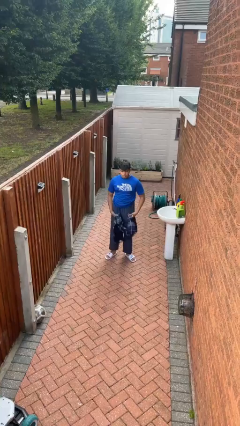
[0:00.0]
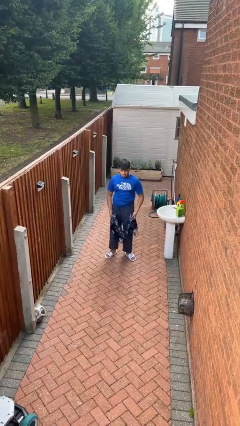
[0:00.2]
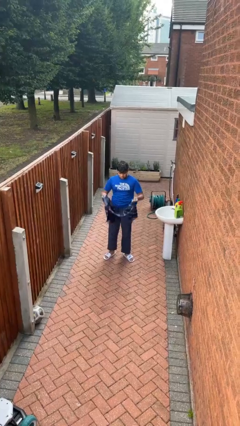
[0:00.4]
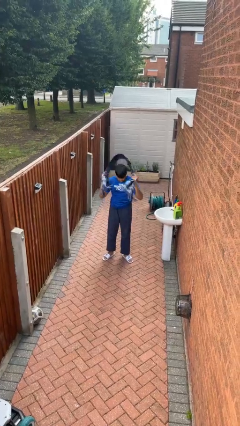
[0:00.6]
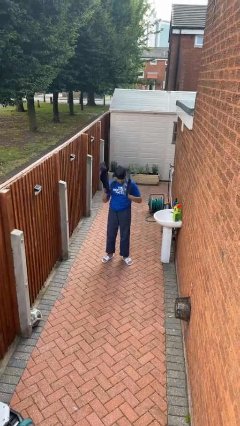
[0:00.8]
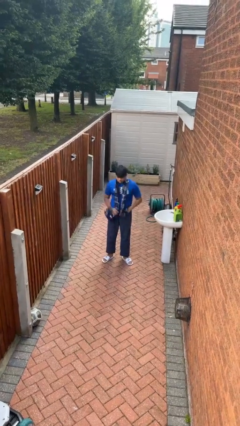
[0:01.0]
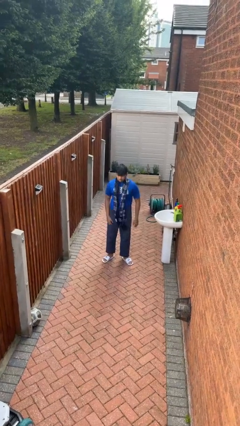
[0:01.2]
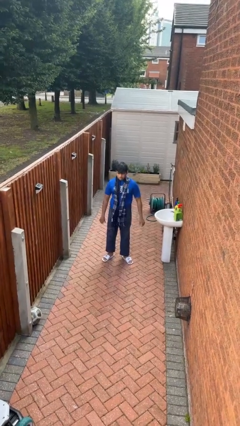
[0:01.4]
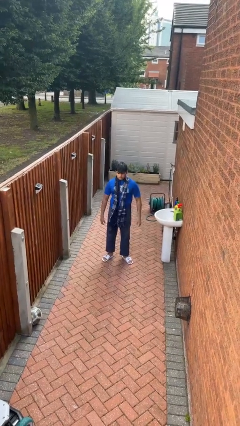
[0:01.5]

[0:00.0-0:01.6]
person puts on scarf

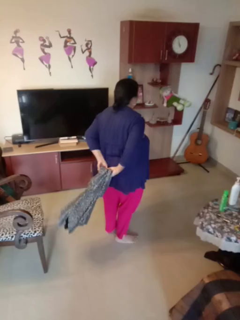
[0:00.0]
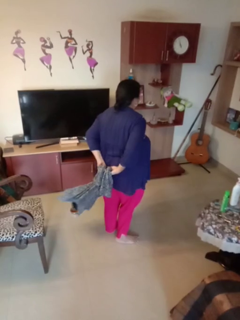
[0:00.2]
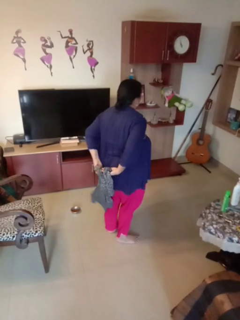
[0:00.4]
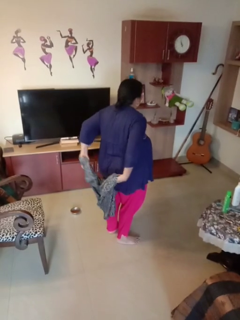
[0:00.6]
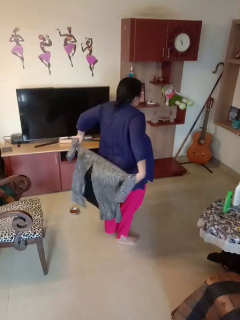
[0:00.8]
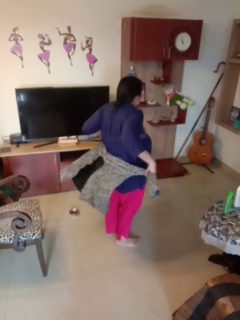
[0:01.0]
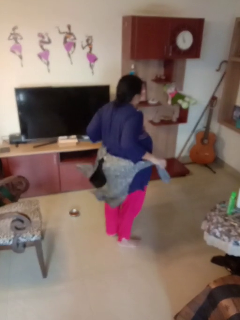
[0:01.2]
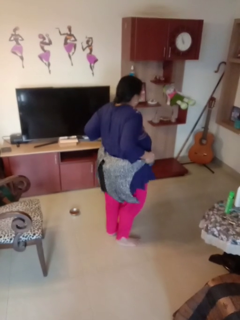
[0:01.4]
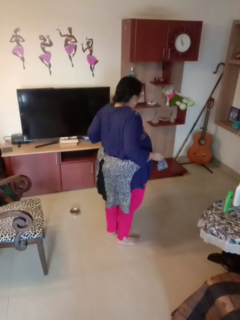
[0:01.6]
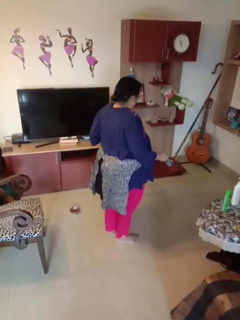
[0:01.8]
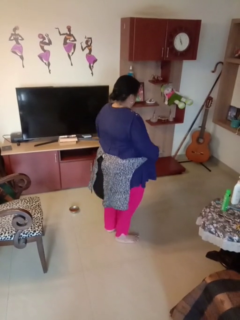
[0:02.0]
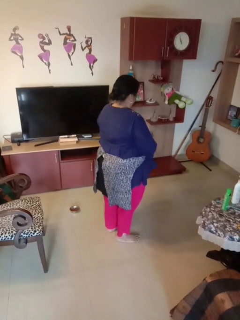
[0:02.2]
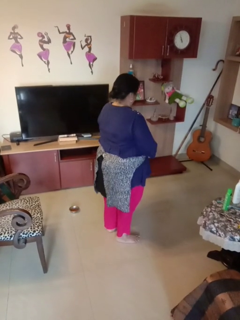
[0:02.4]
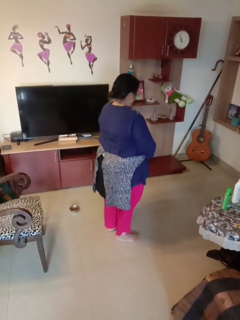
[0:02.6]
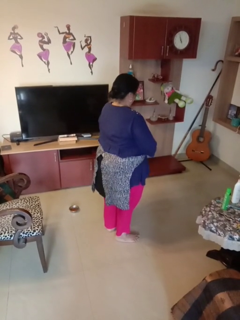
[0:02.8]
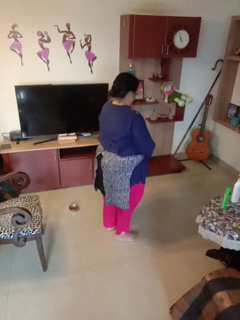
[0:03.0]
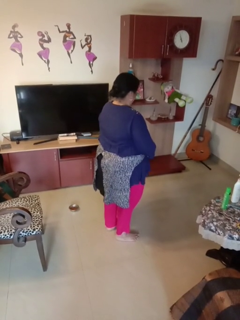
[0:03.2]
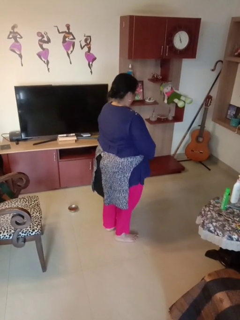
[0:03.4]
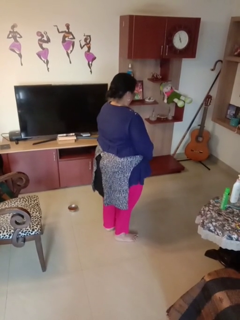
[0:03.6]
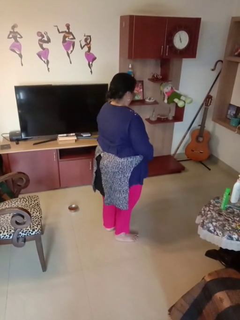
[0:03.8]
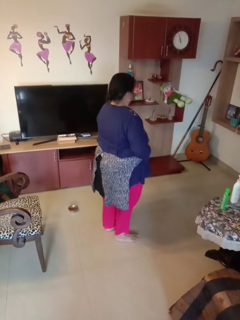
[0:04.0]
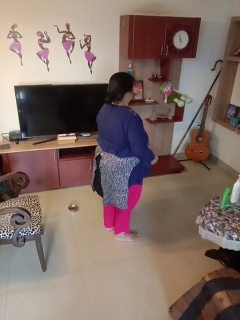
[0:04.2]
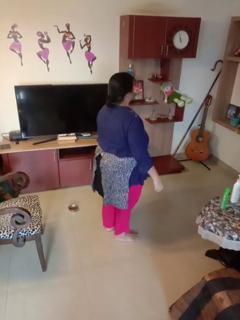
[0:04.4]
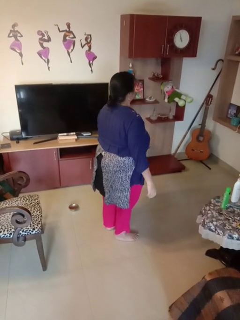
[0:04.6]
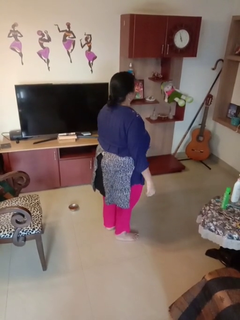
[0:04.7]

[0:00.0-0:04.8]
person ties jacket around waist

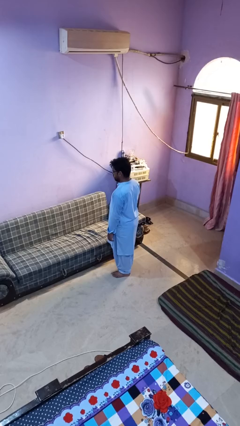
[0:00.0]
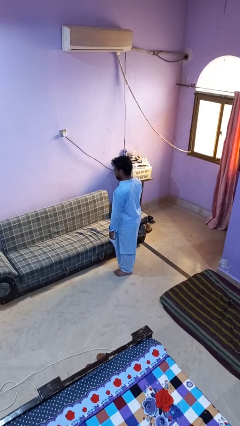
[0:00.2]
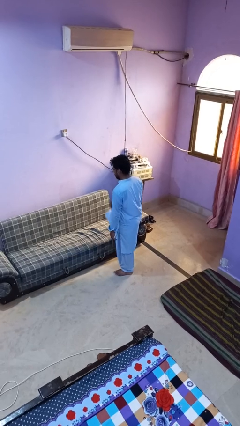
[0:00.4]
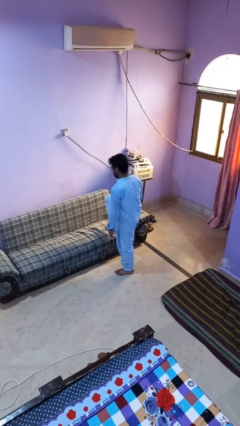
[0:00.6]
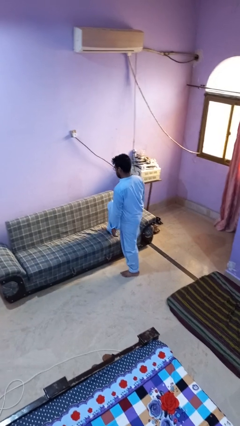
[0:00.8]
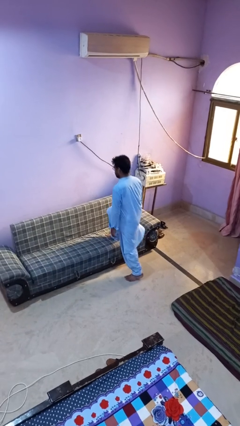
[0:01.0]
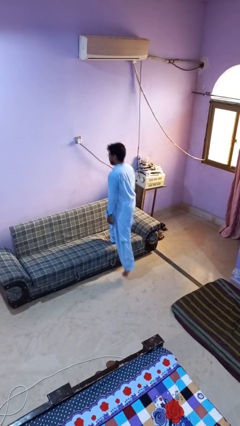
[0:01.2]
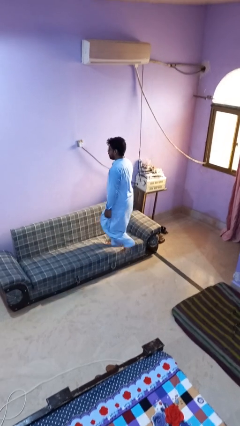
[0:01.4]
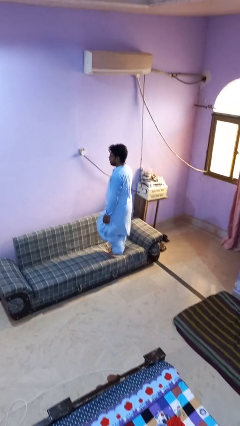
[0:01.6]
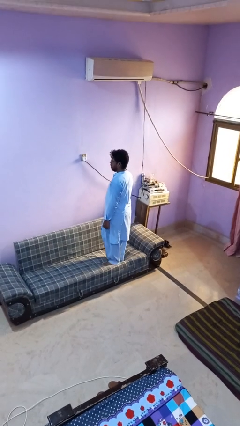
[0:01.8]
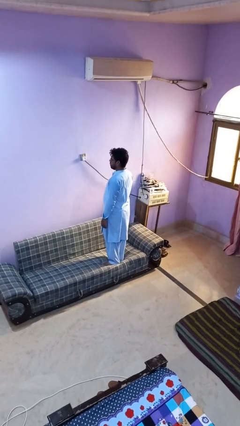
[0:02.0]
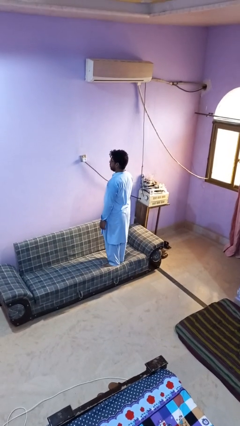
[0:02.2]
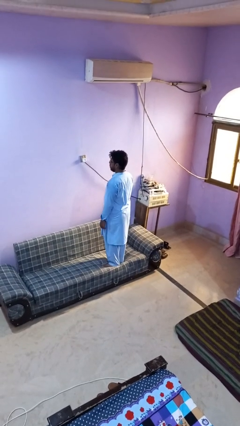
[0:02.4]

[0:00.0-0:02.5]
person climbs on couch

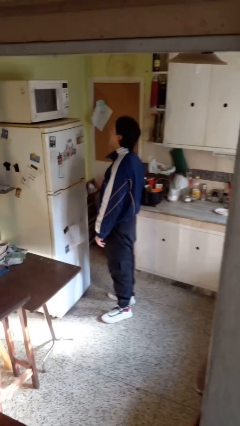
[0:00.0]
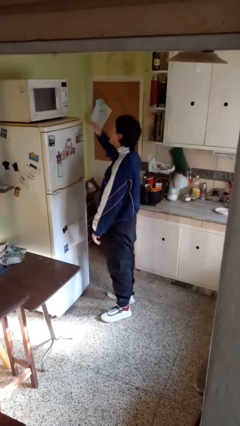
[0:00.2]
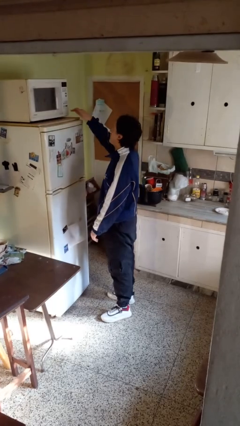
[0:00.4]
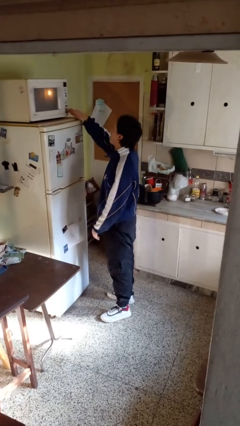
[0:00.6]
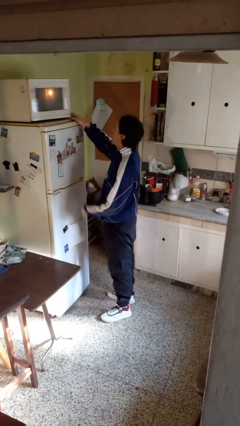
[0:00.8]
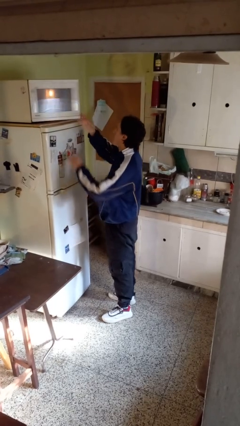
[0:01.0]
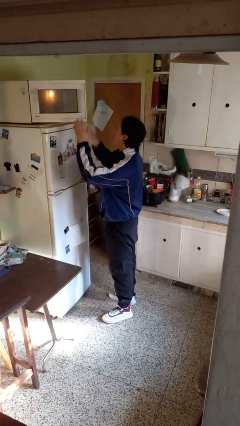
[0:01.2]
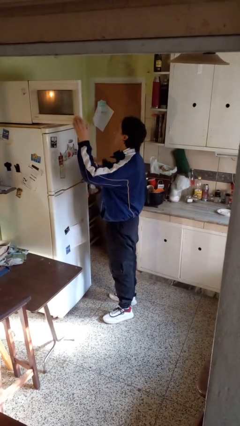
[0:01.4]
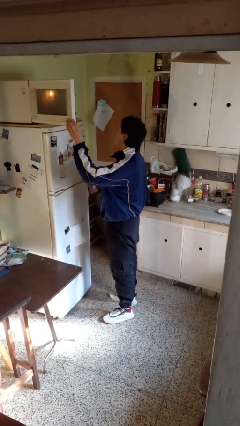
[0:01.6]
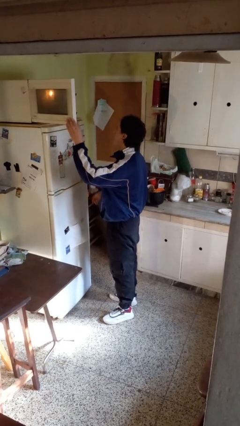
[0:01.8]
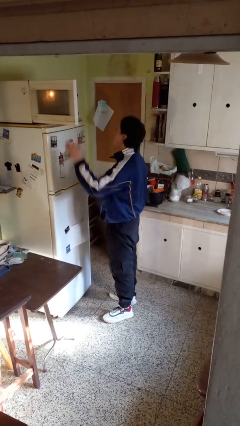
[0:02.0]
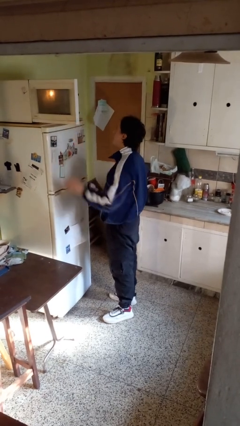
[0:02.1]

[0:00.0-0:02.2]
person opens microwave

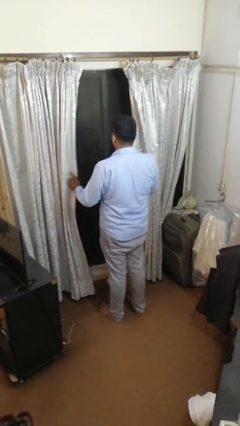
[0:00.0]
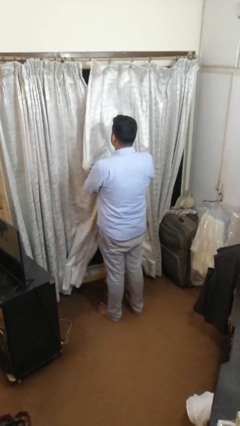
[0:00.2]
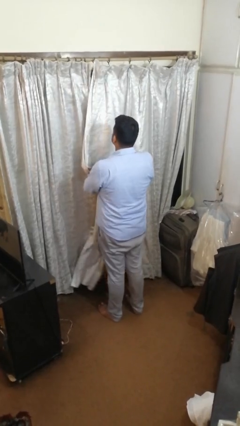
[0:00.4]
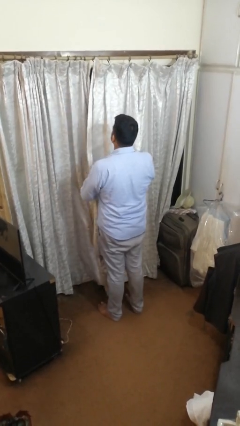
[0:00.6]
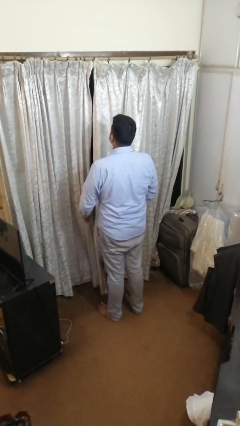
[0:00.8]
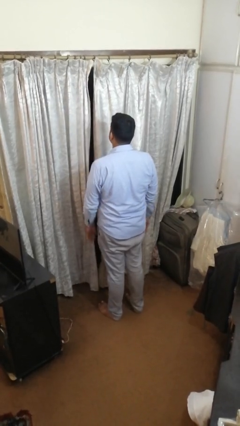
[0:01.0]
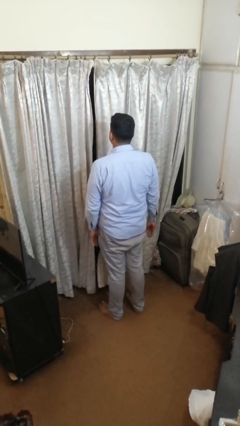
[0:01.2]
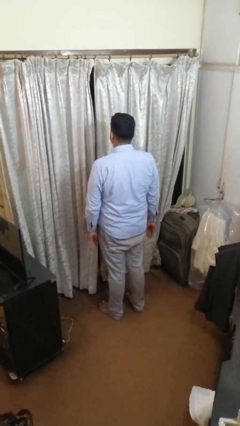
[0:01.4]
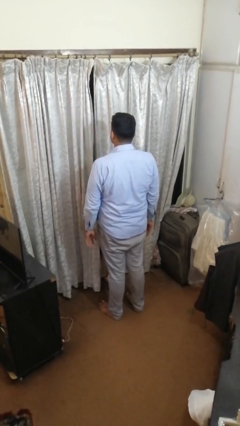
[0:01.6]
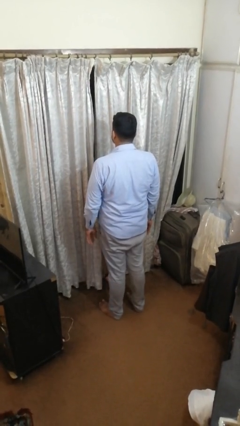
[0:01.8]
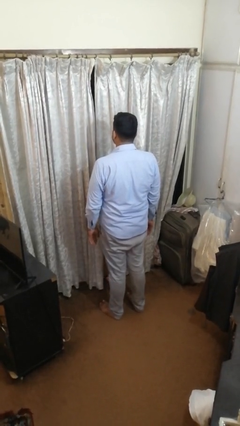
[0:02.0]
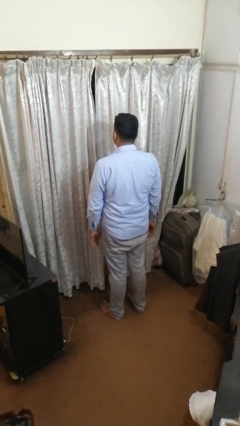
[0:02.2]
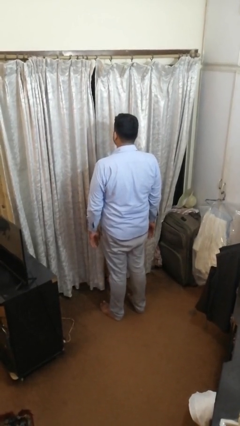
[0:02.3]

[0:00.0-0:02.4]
person closes curtains

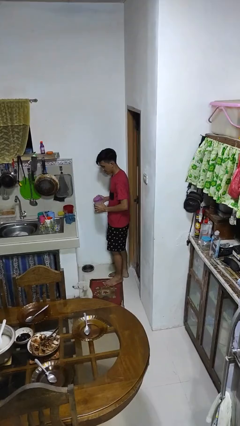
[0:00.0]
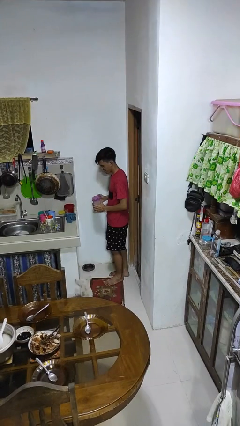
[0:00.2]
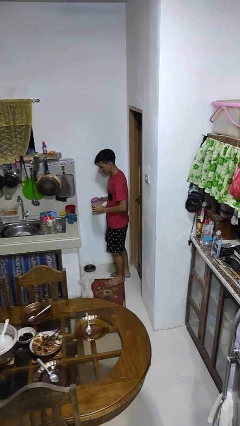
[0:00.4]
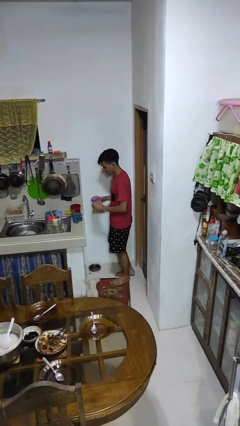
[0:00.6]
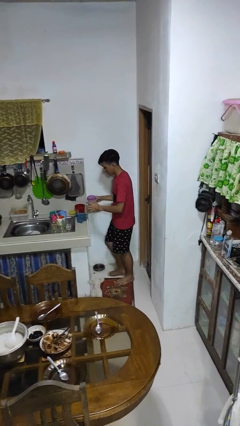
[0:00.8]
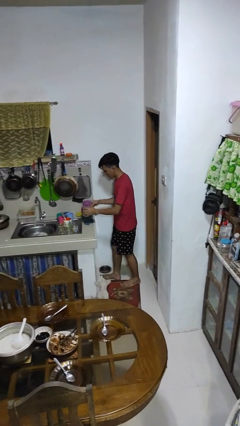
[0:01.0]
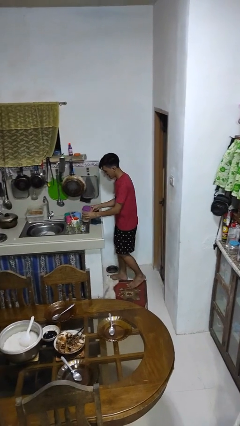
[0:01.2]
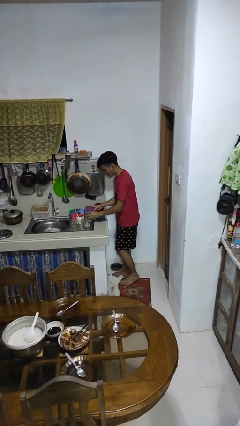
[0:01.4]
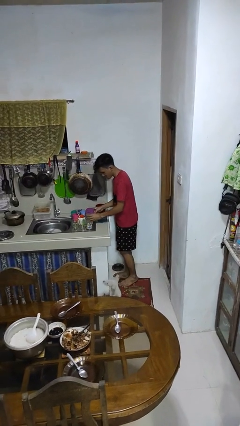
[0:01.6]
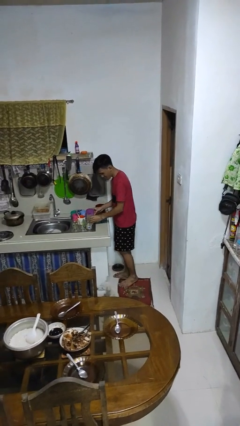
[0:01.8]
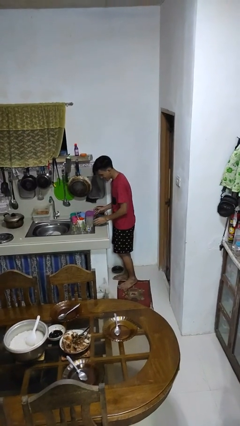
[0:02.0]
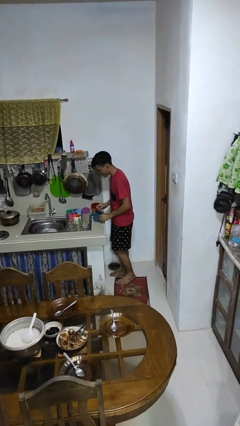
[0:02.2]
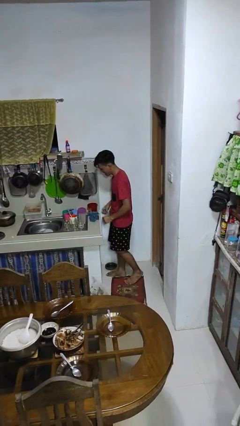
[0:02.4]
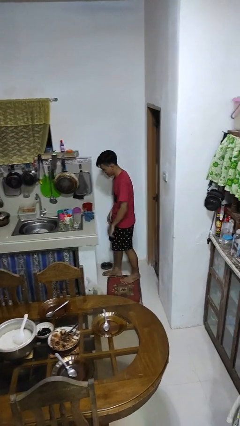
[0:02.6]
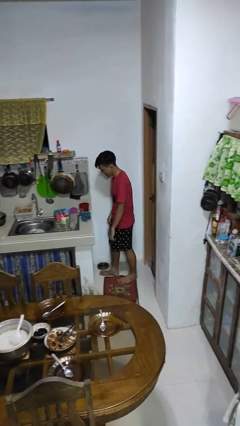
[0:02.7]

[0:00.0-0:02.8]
person puts down object on countertop

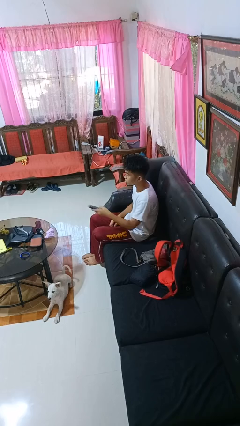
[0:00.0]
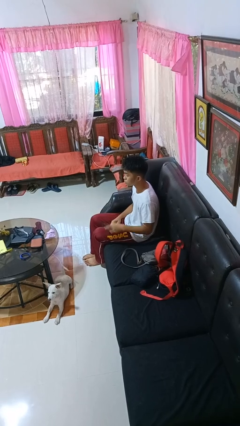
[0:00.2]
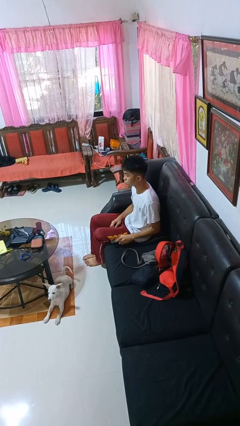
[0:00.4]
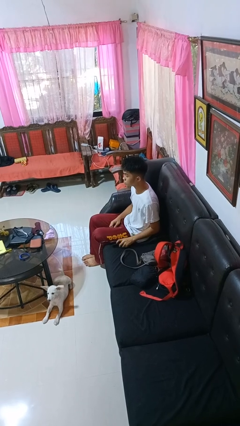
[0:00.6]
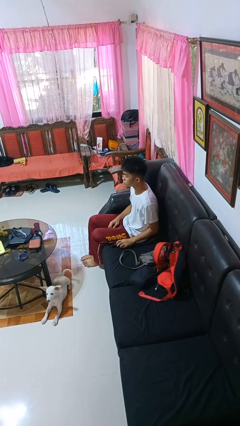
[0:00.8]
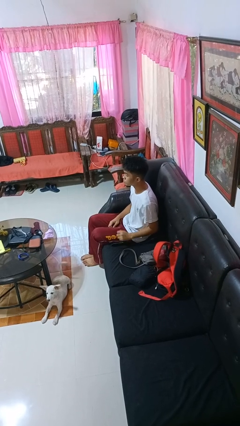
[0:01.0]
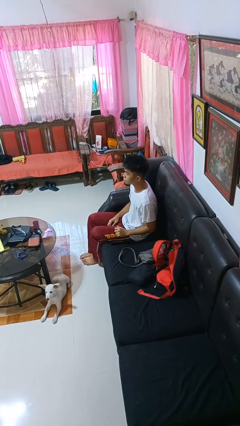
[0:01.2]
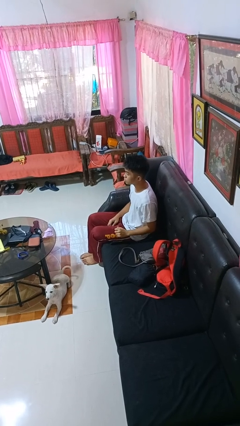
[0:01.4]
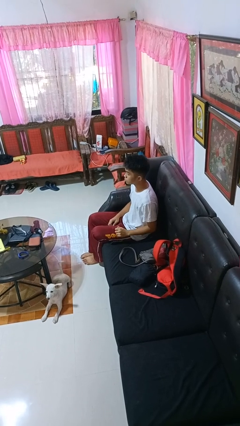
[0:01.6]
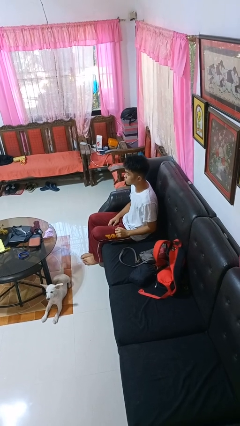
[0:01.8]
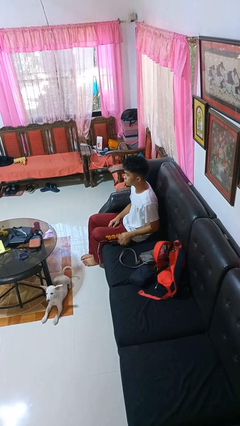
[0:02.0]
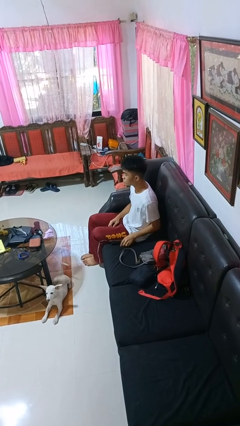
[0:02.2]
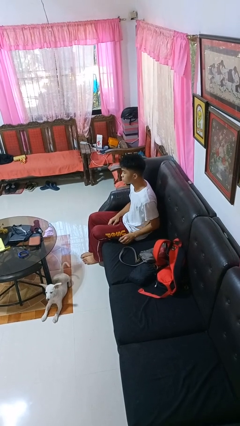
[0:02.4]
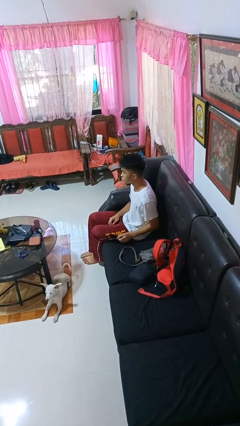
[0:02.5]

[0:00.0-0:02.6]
person puts down object on shelf
